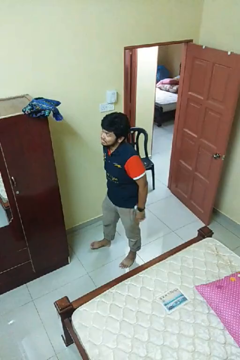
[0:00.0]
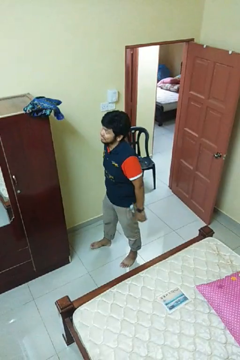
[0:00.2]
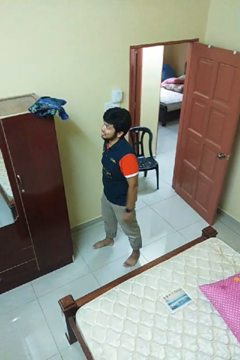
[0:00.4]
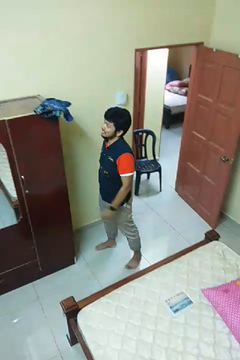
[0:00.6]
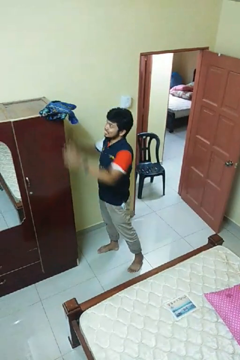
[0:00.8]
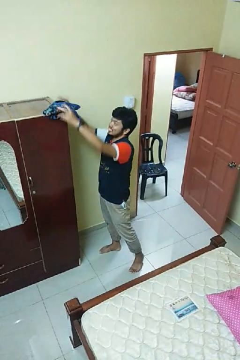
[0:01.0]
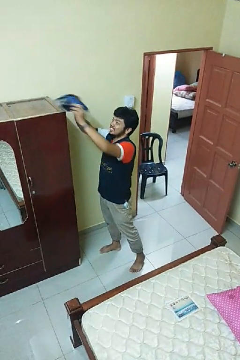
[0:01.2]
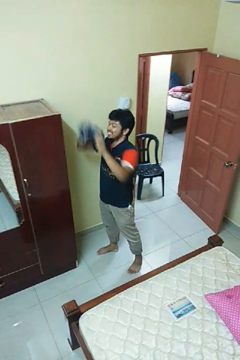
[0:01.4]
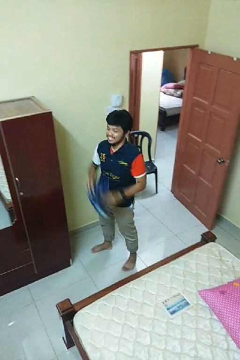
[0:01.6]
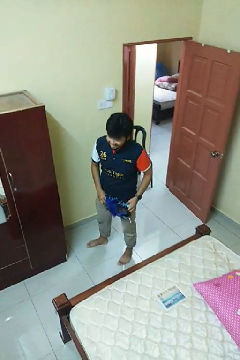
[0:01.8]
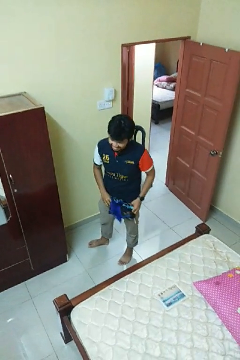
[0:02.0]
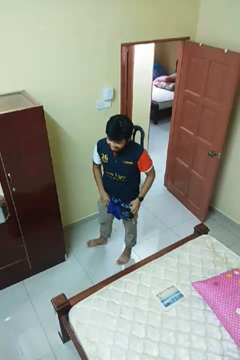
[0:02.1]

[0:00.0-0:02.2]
person picks up object from countertop

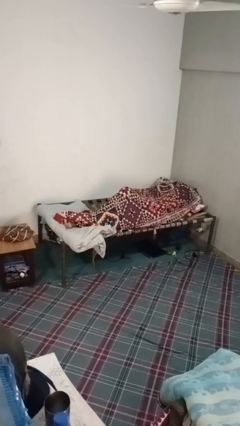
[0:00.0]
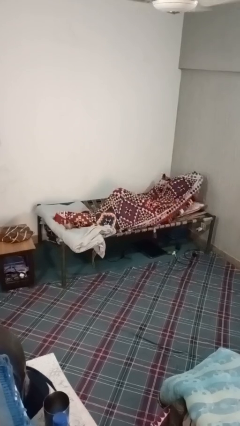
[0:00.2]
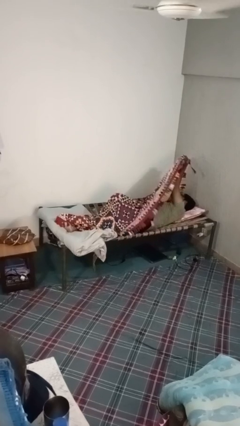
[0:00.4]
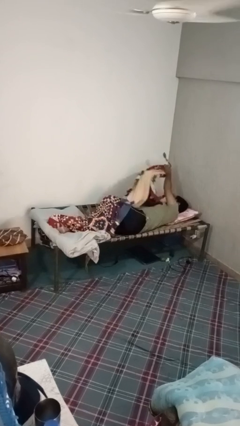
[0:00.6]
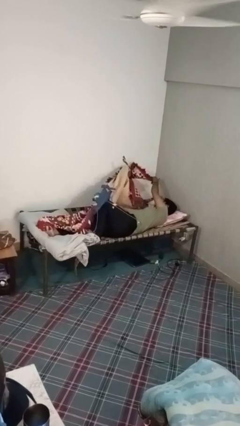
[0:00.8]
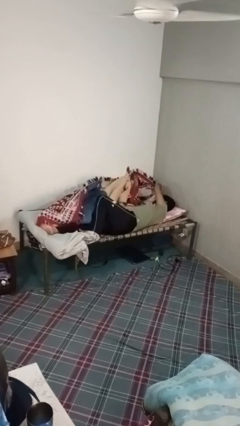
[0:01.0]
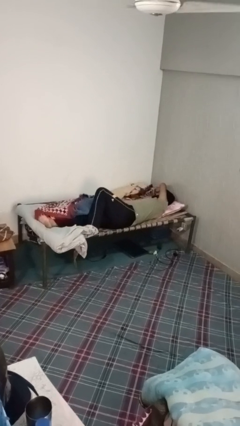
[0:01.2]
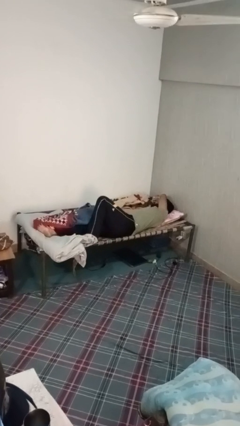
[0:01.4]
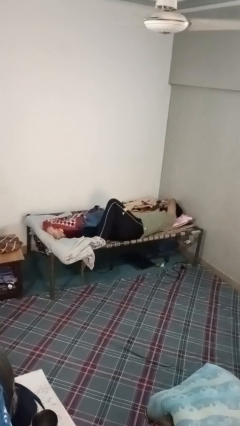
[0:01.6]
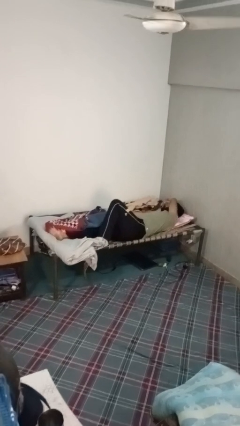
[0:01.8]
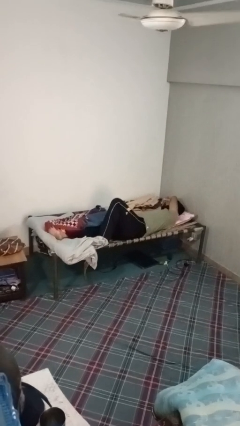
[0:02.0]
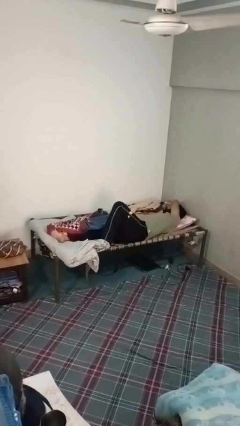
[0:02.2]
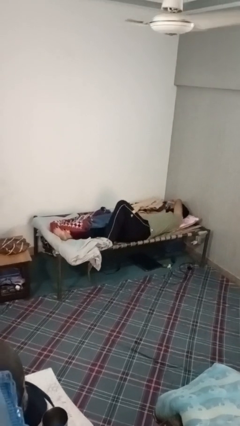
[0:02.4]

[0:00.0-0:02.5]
person uncovers with blanket

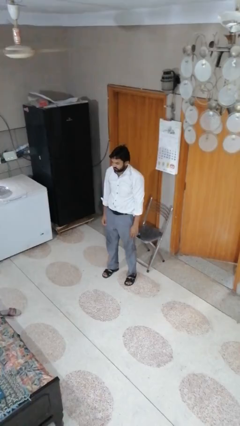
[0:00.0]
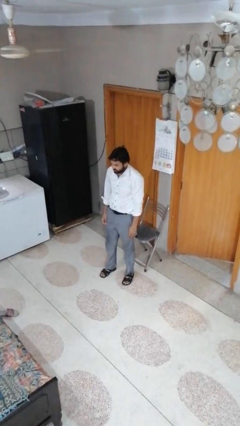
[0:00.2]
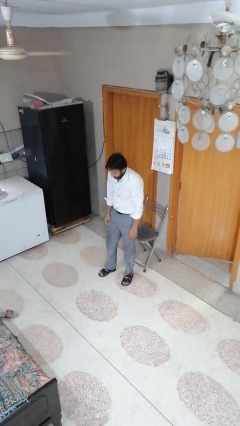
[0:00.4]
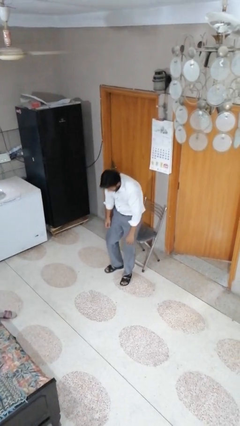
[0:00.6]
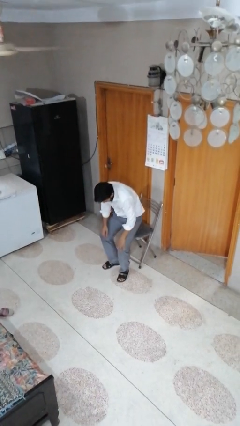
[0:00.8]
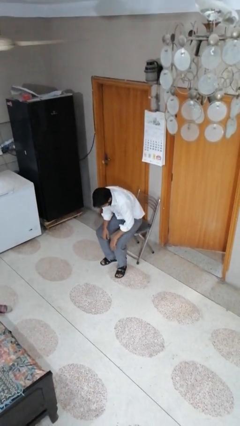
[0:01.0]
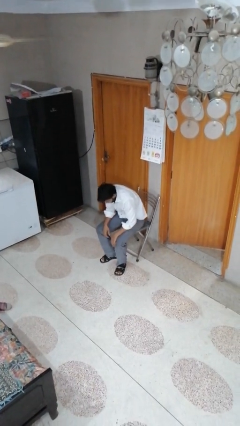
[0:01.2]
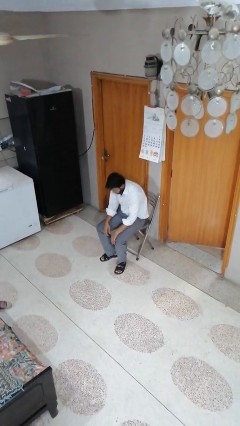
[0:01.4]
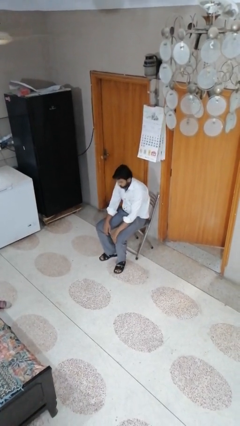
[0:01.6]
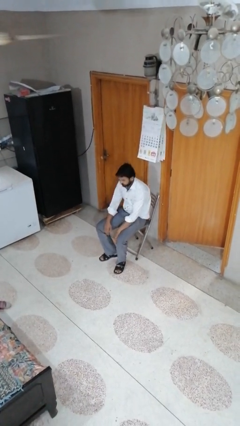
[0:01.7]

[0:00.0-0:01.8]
person sits down

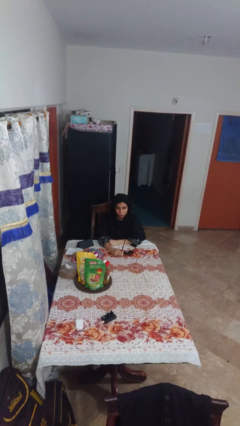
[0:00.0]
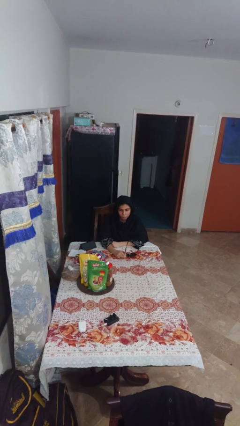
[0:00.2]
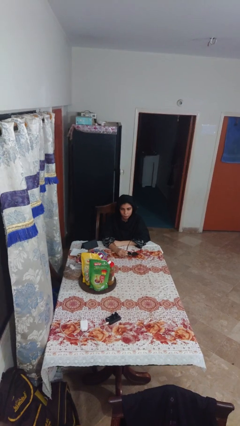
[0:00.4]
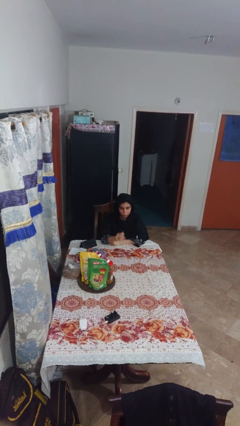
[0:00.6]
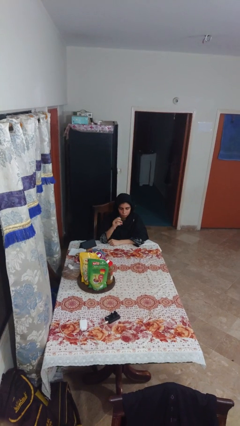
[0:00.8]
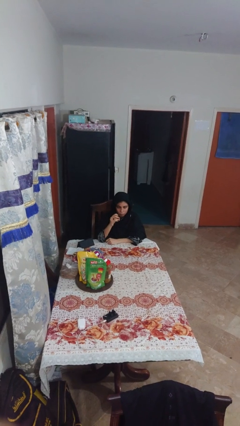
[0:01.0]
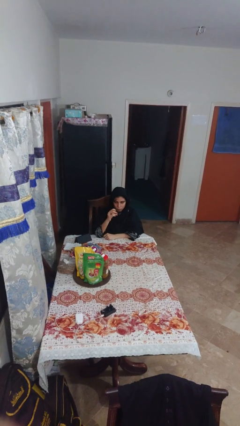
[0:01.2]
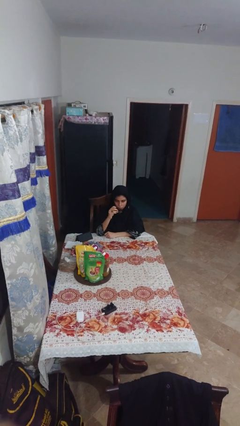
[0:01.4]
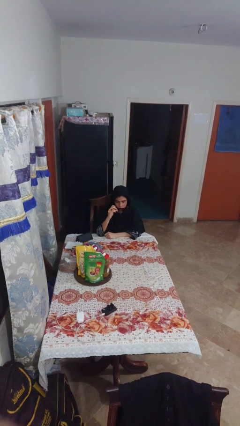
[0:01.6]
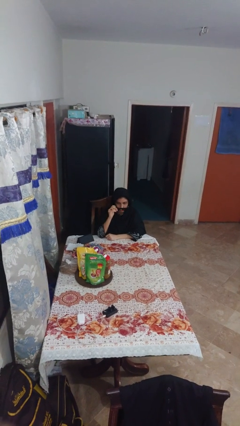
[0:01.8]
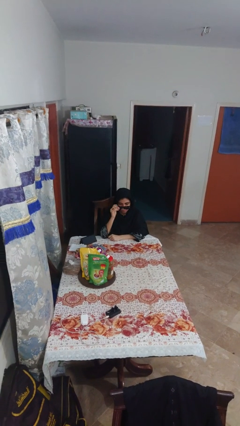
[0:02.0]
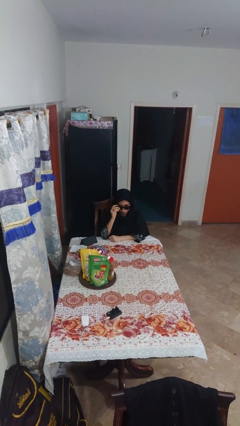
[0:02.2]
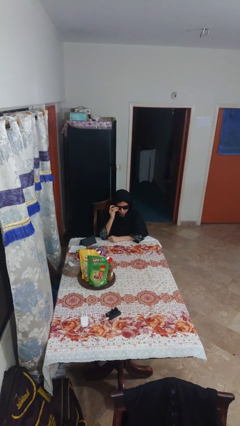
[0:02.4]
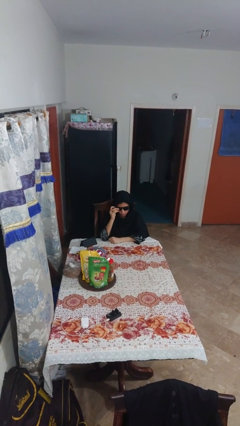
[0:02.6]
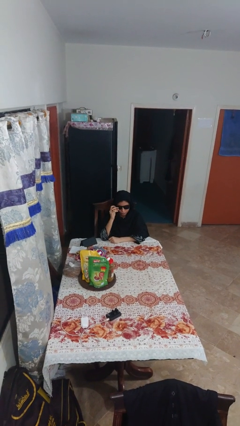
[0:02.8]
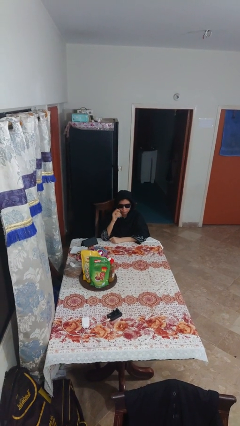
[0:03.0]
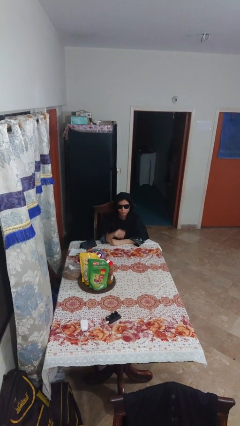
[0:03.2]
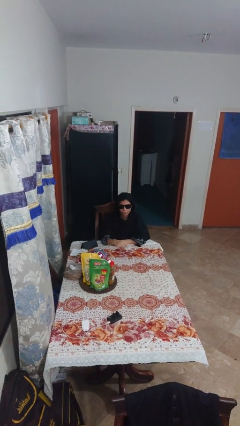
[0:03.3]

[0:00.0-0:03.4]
person puts on sunglasses

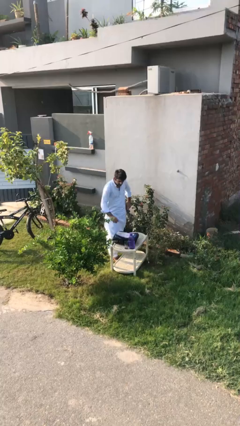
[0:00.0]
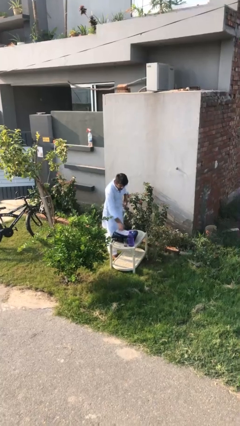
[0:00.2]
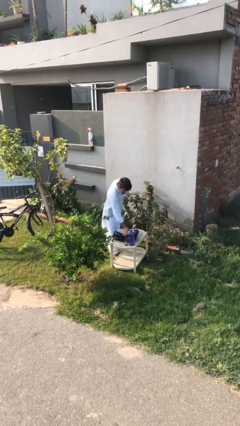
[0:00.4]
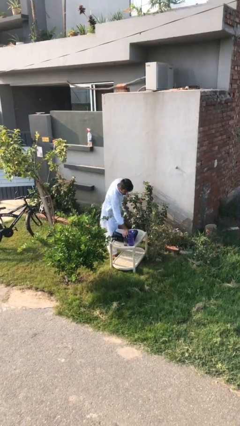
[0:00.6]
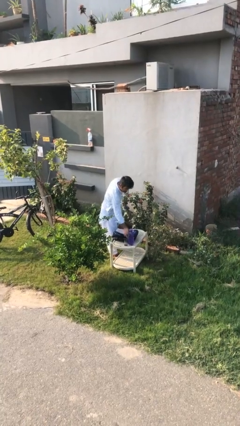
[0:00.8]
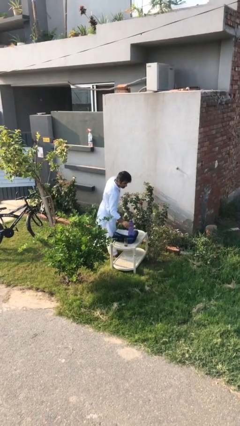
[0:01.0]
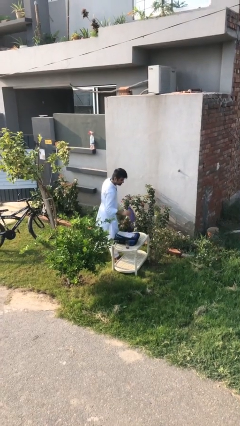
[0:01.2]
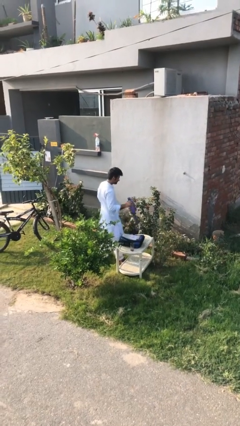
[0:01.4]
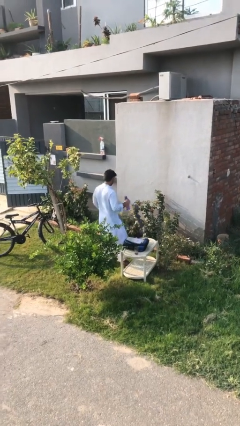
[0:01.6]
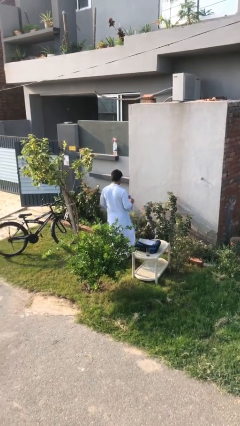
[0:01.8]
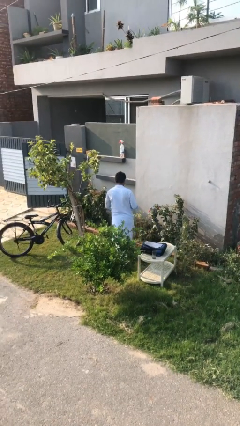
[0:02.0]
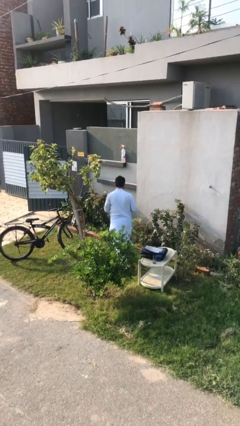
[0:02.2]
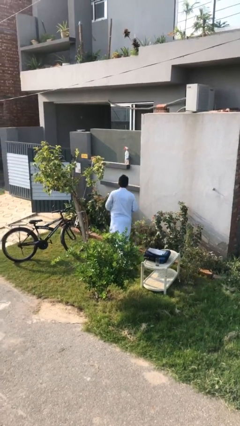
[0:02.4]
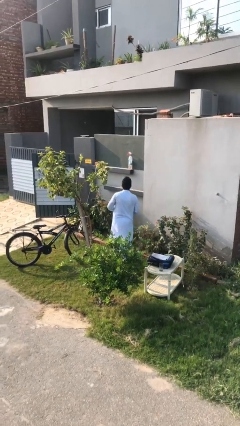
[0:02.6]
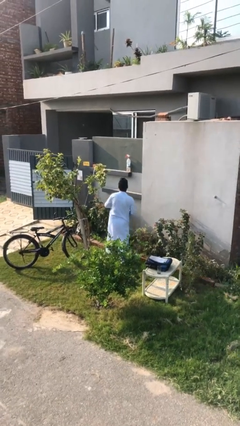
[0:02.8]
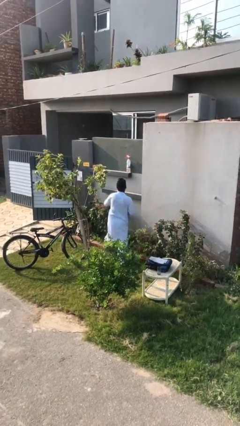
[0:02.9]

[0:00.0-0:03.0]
person picks up object from table

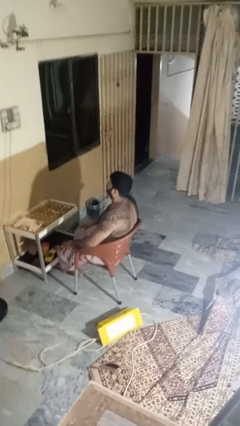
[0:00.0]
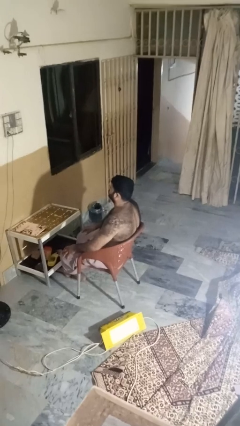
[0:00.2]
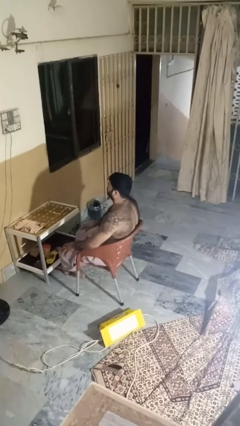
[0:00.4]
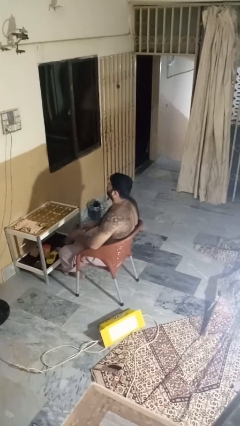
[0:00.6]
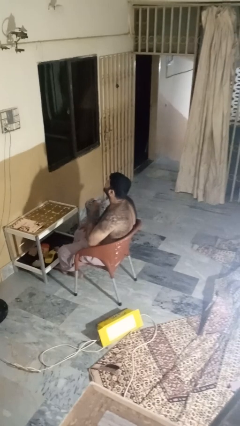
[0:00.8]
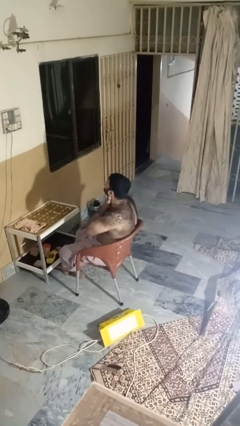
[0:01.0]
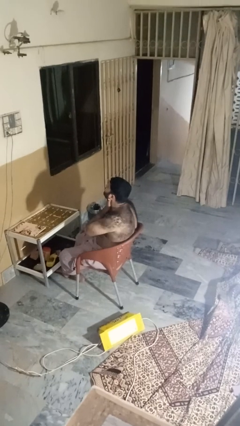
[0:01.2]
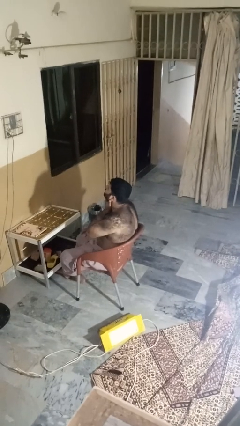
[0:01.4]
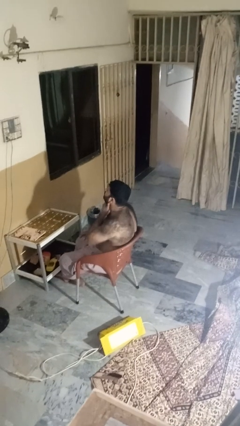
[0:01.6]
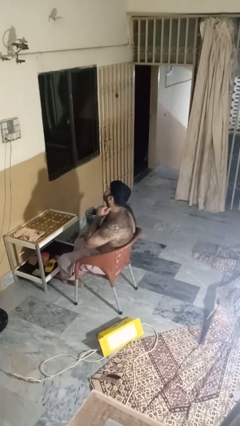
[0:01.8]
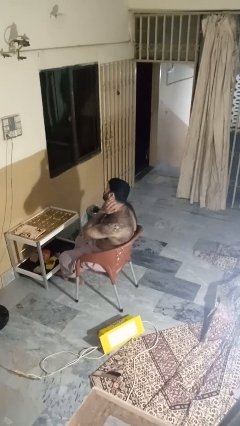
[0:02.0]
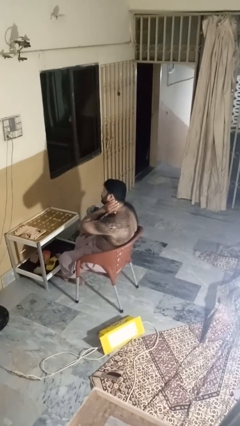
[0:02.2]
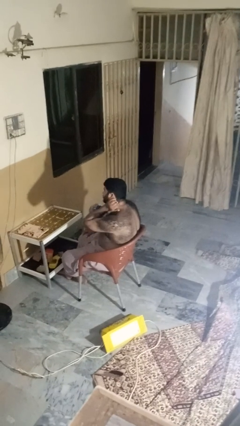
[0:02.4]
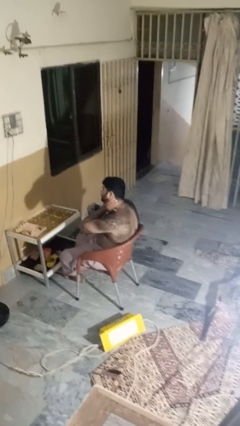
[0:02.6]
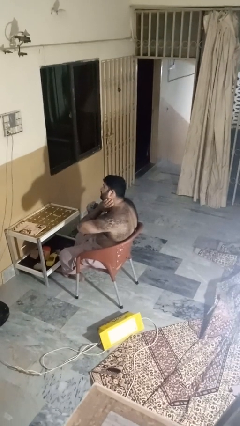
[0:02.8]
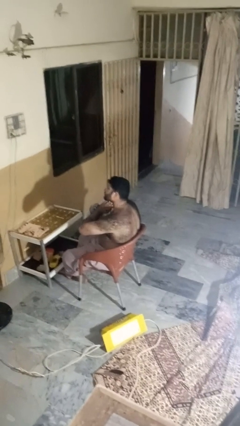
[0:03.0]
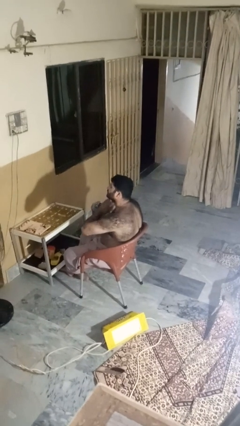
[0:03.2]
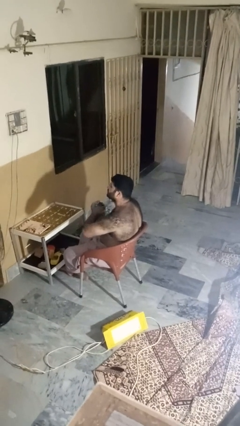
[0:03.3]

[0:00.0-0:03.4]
person rubs neck

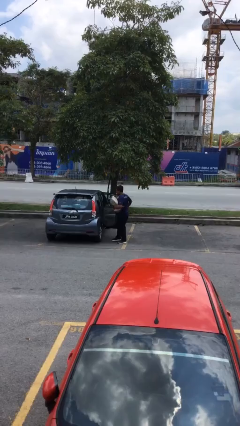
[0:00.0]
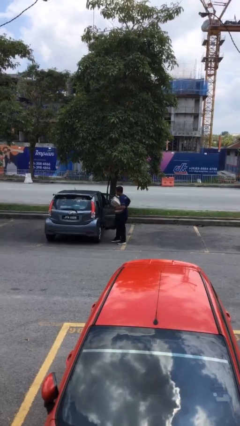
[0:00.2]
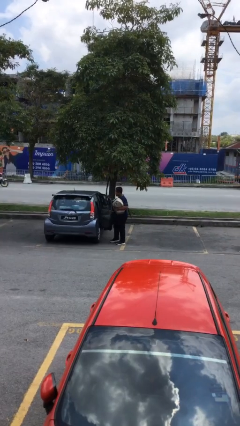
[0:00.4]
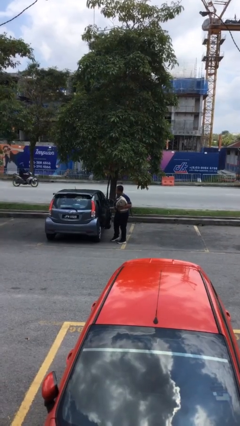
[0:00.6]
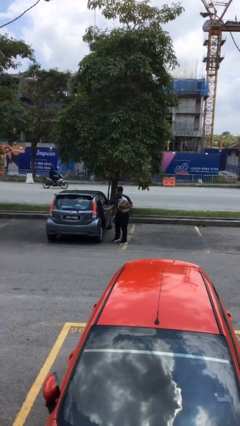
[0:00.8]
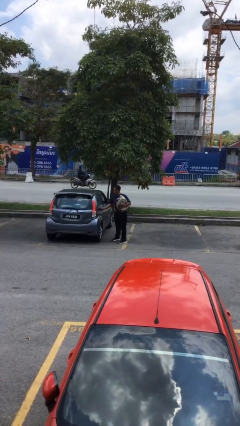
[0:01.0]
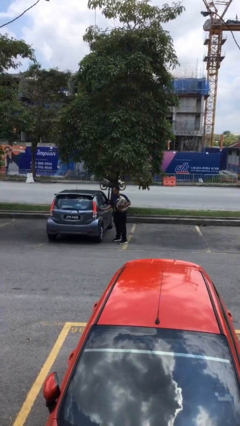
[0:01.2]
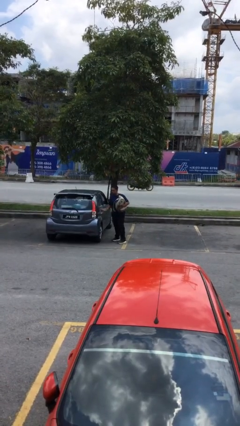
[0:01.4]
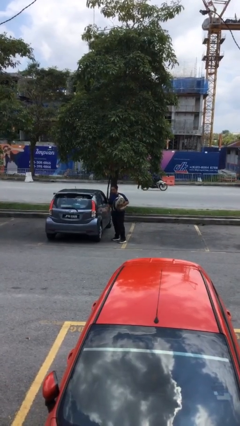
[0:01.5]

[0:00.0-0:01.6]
person closes car door
